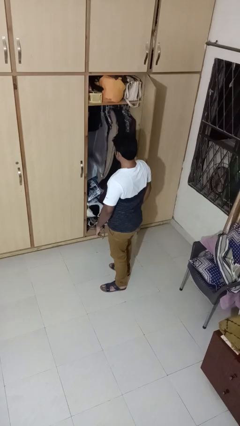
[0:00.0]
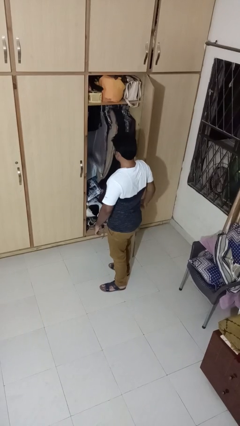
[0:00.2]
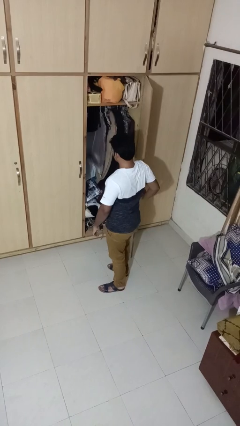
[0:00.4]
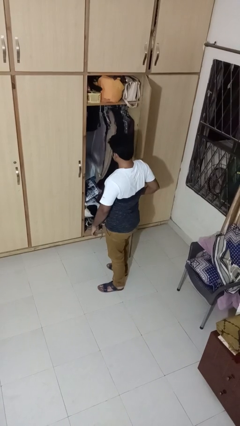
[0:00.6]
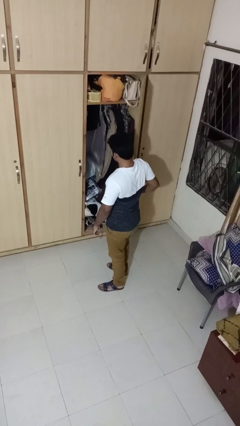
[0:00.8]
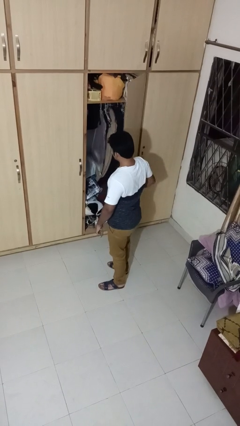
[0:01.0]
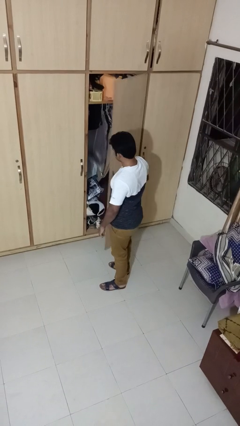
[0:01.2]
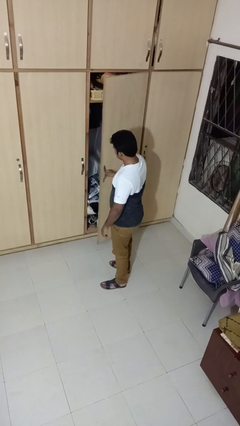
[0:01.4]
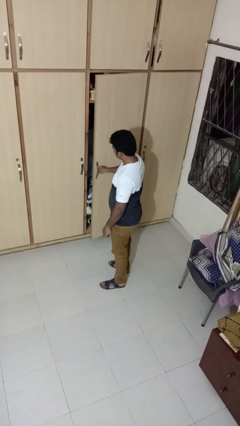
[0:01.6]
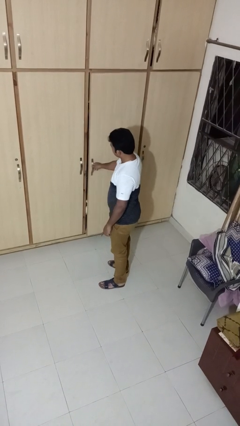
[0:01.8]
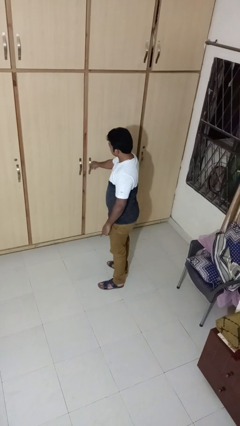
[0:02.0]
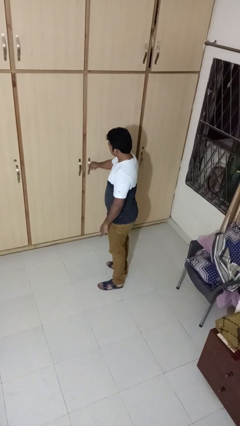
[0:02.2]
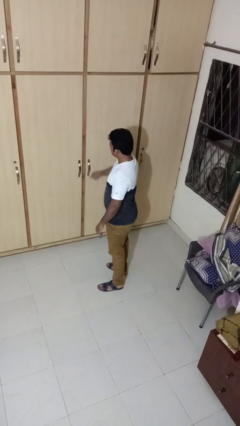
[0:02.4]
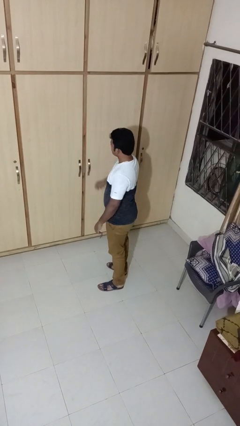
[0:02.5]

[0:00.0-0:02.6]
person closes closet door

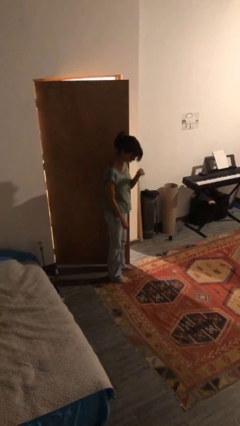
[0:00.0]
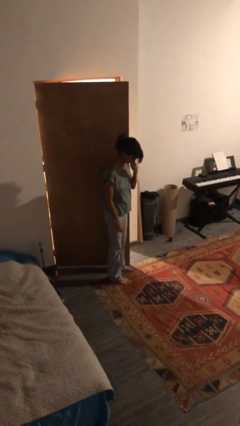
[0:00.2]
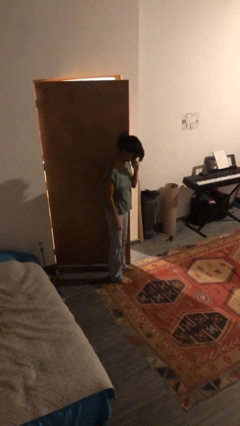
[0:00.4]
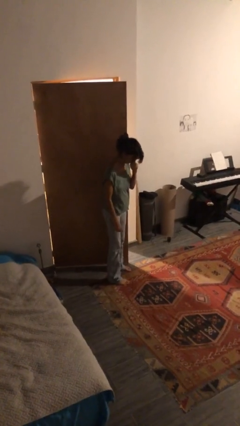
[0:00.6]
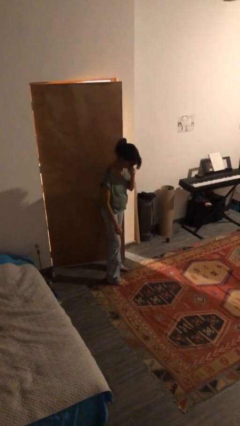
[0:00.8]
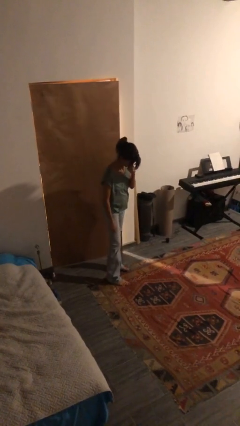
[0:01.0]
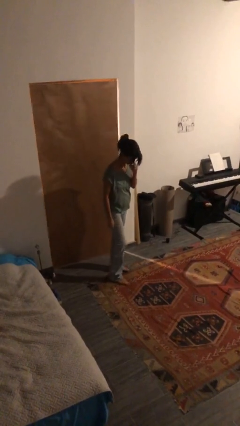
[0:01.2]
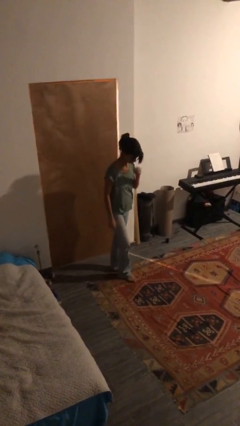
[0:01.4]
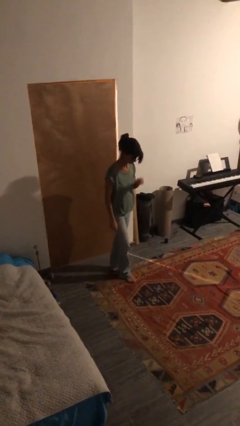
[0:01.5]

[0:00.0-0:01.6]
person closes door with hip

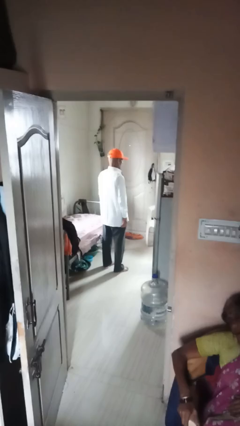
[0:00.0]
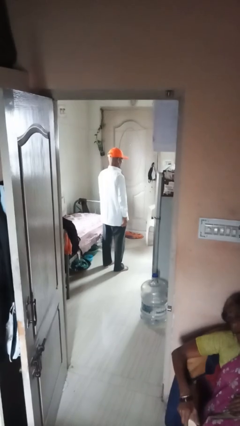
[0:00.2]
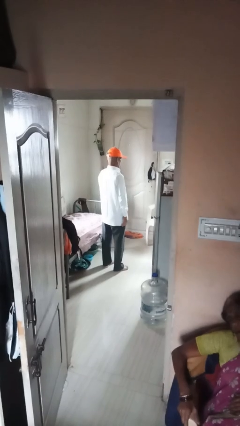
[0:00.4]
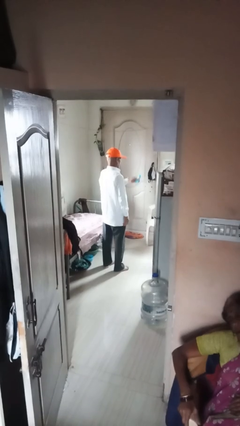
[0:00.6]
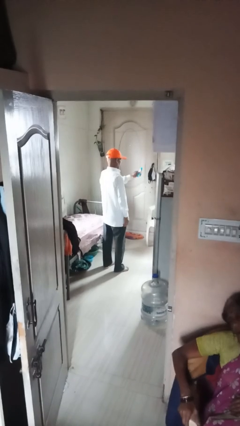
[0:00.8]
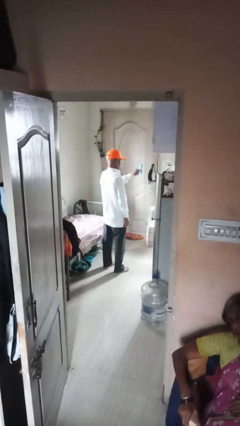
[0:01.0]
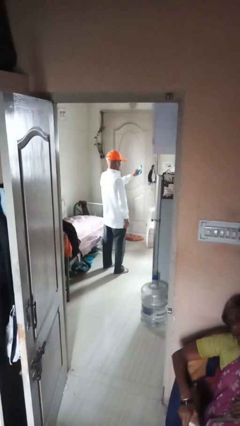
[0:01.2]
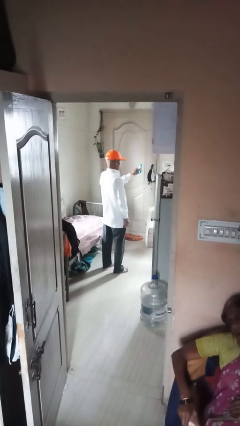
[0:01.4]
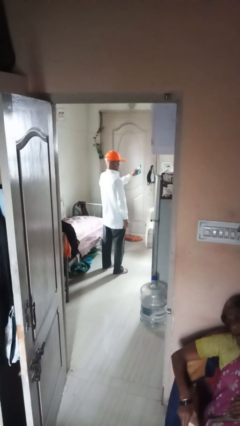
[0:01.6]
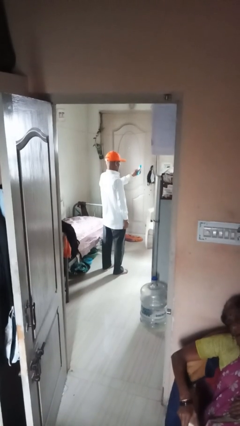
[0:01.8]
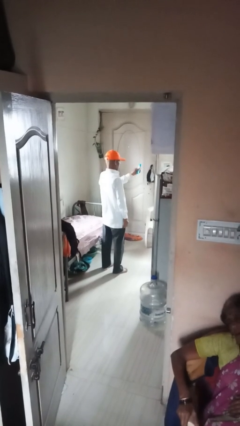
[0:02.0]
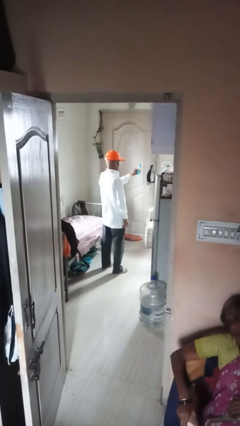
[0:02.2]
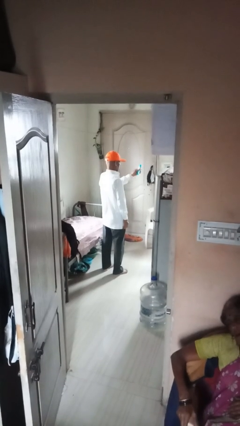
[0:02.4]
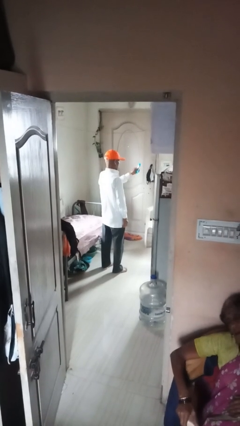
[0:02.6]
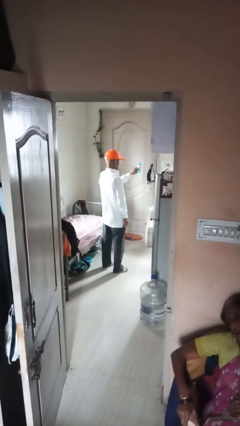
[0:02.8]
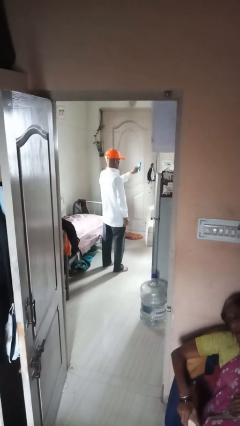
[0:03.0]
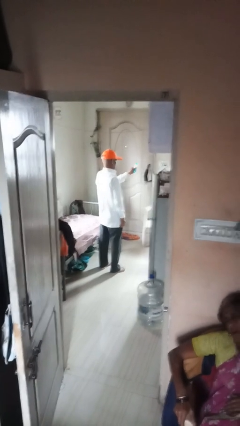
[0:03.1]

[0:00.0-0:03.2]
person squeezes object

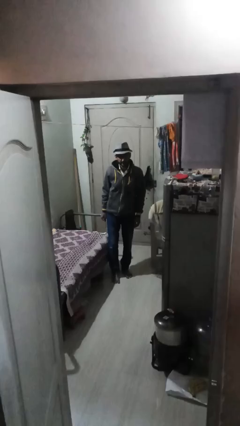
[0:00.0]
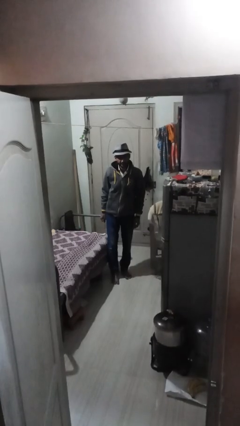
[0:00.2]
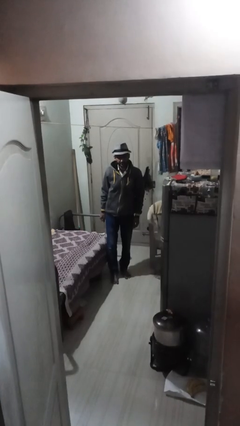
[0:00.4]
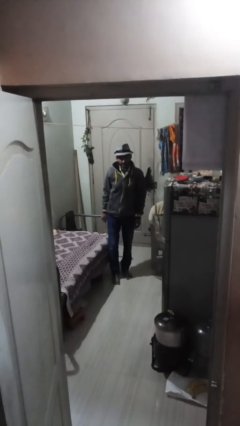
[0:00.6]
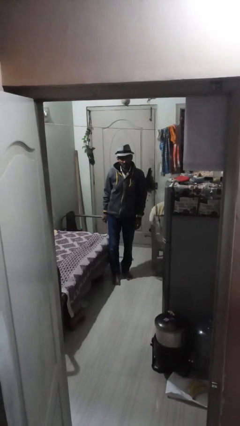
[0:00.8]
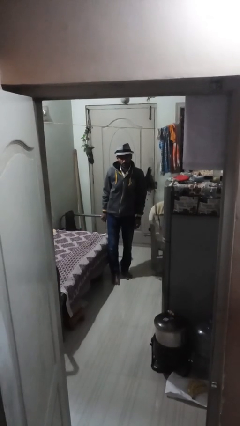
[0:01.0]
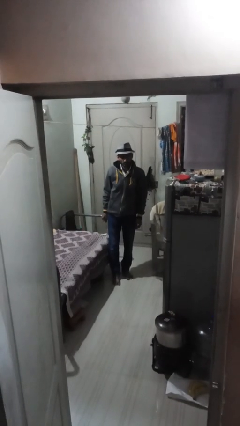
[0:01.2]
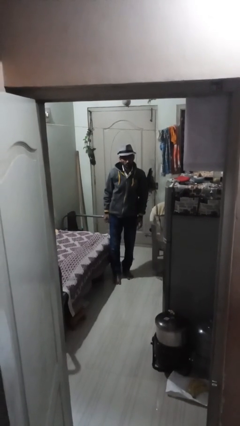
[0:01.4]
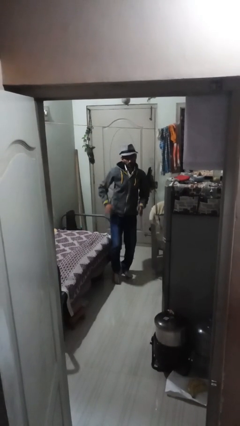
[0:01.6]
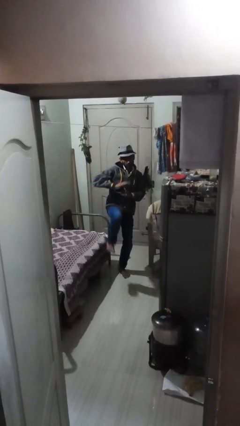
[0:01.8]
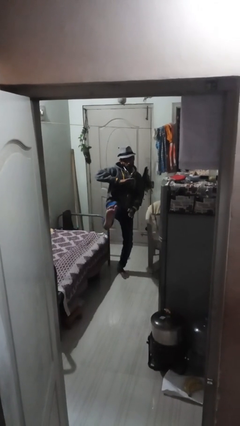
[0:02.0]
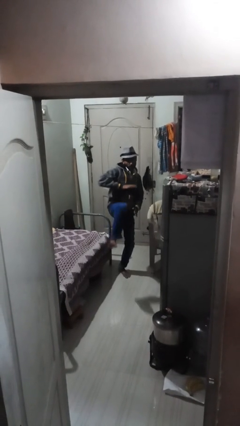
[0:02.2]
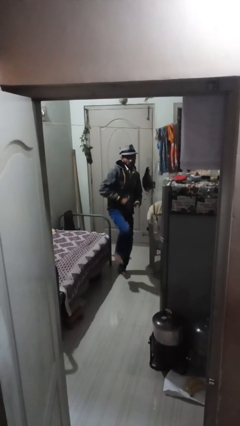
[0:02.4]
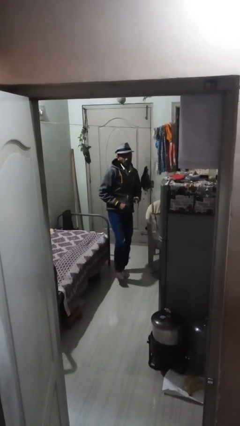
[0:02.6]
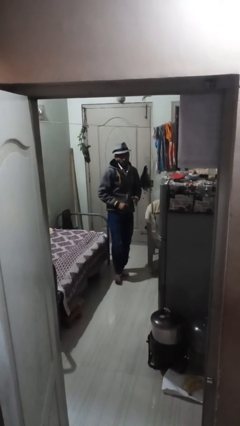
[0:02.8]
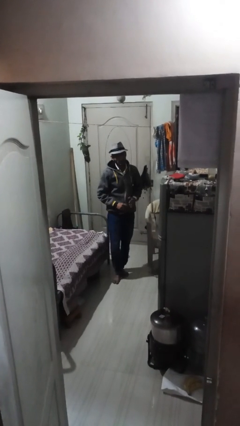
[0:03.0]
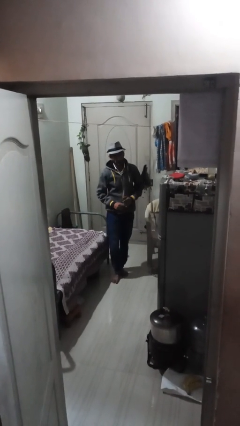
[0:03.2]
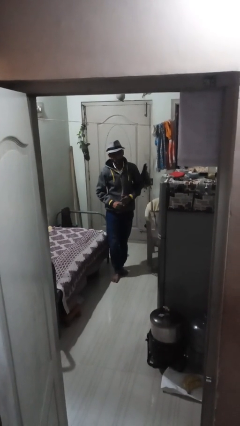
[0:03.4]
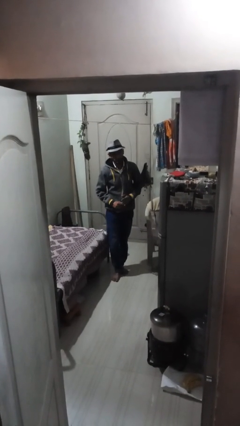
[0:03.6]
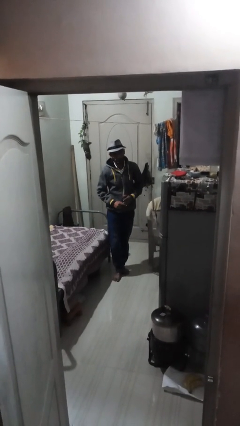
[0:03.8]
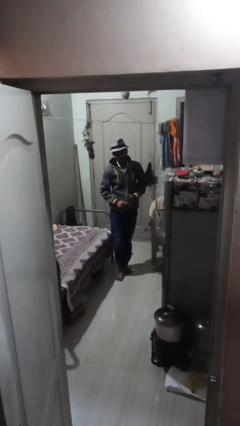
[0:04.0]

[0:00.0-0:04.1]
person karate kicks

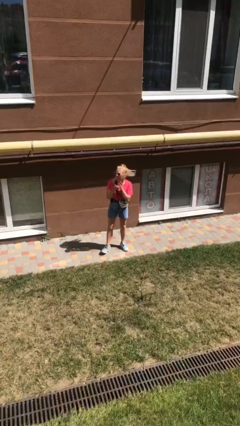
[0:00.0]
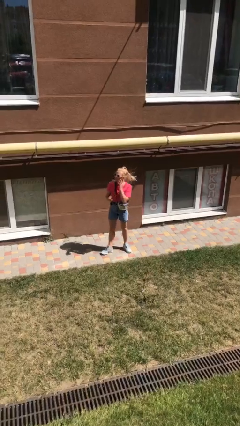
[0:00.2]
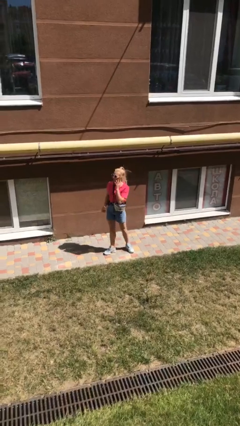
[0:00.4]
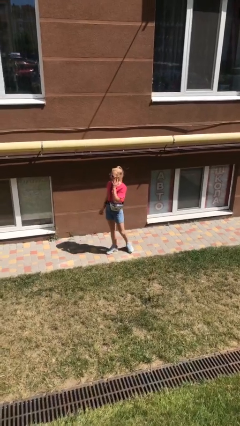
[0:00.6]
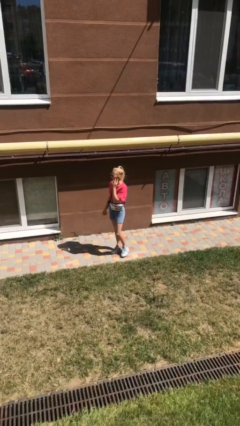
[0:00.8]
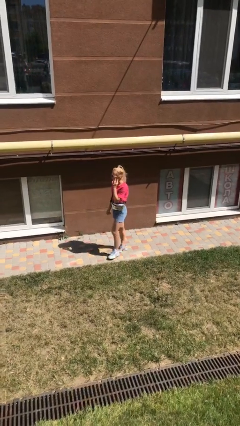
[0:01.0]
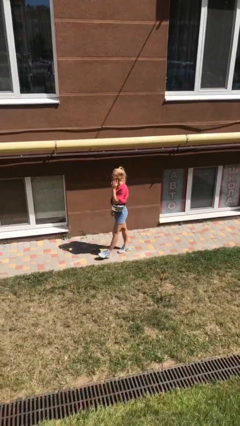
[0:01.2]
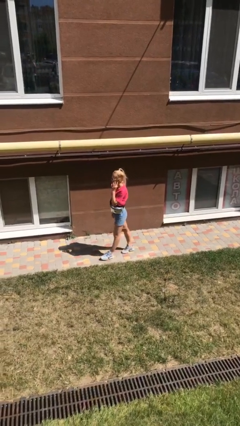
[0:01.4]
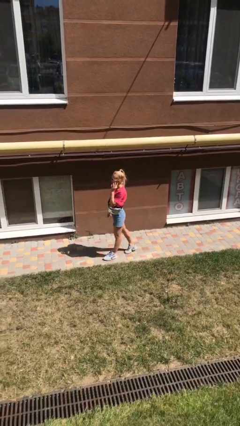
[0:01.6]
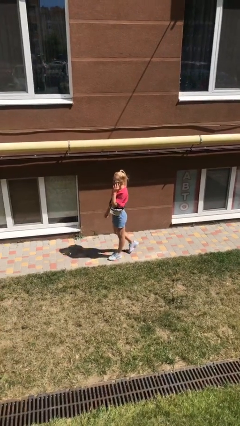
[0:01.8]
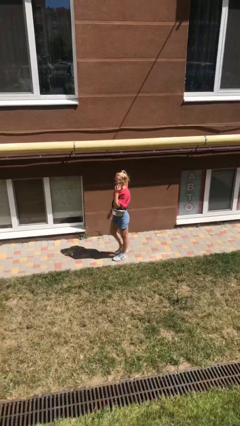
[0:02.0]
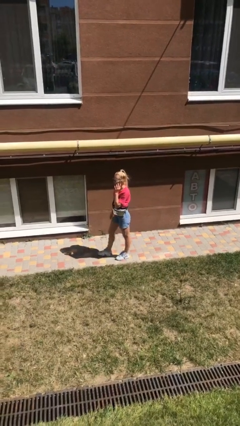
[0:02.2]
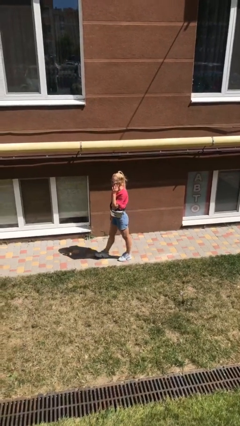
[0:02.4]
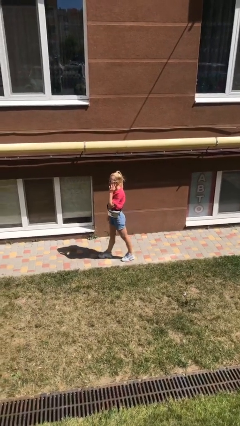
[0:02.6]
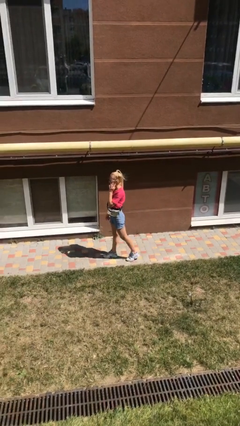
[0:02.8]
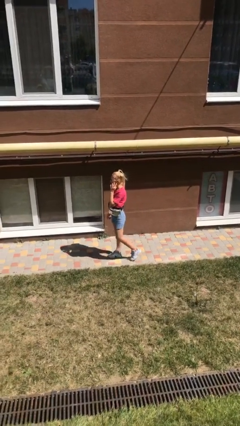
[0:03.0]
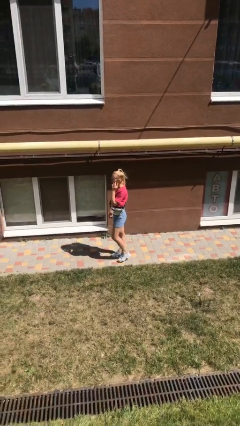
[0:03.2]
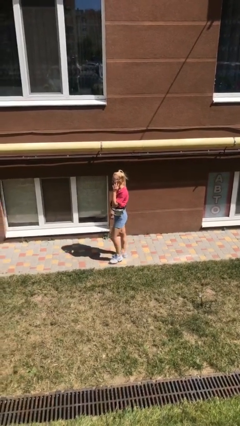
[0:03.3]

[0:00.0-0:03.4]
person talks on phone

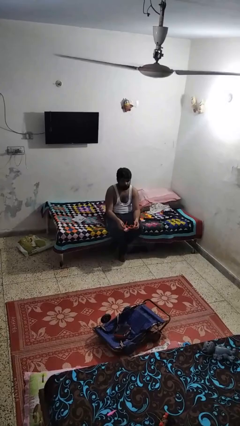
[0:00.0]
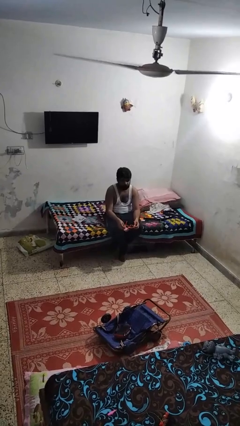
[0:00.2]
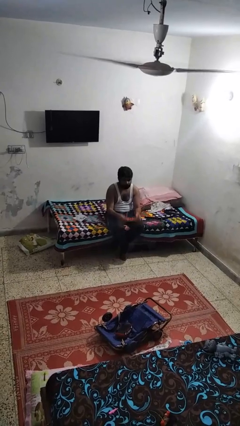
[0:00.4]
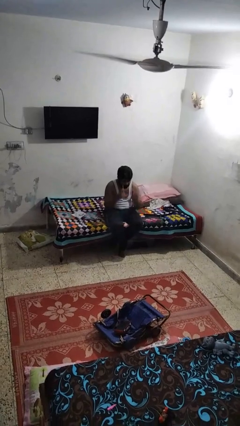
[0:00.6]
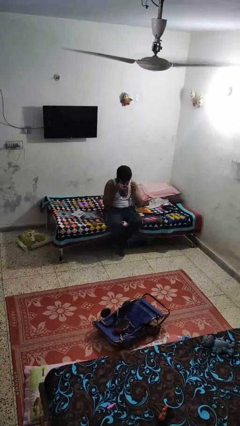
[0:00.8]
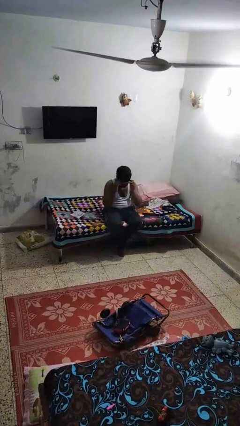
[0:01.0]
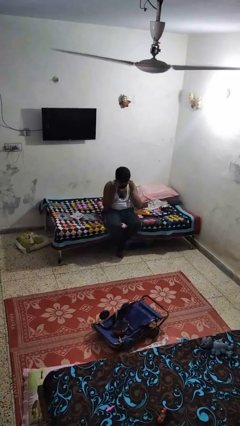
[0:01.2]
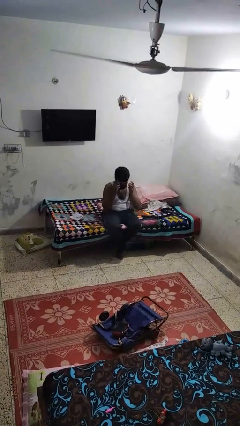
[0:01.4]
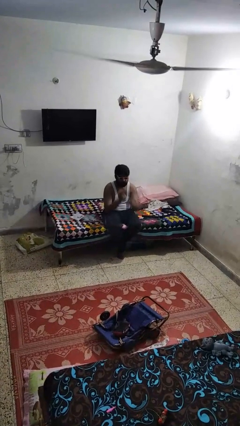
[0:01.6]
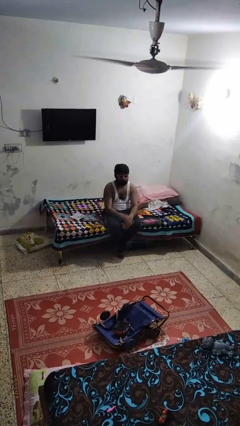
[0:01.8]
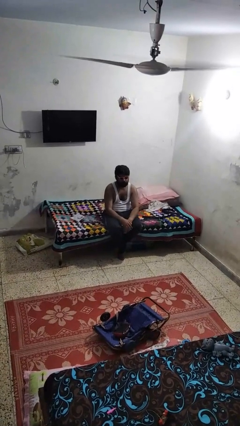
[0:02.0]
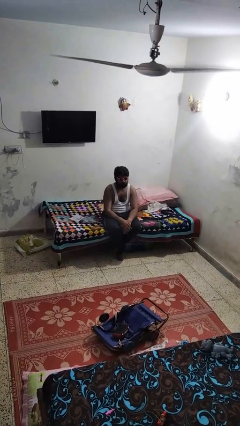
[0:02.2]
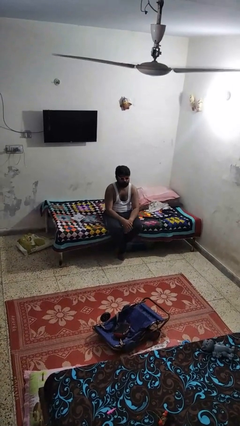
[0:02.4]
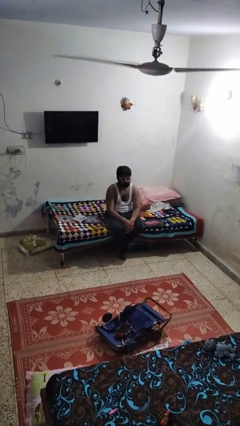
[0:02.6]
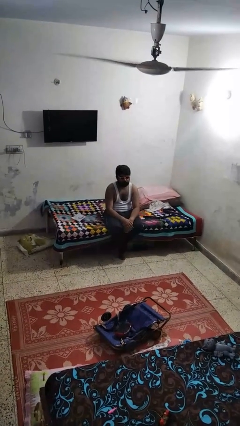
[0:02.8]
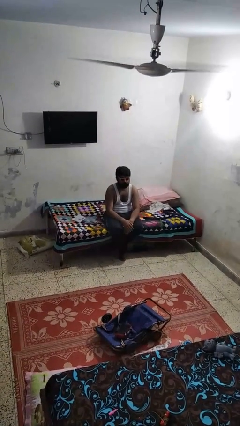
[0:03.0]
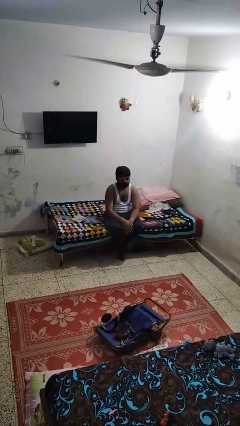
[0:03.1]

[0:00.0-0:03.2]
person puts on sunglasses
